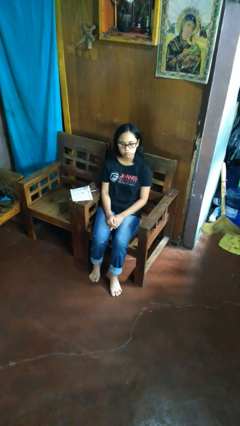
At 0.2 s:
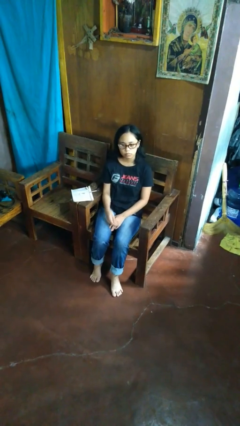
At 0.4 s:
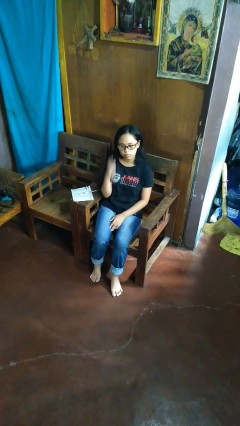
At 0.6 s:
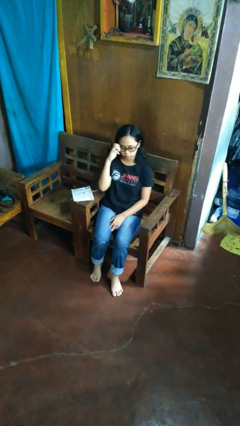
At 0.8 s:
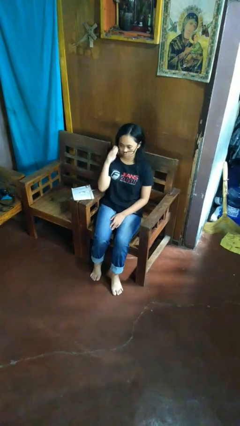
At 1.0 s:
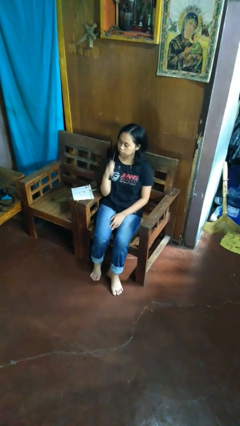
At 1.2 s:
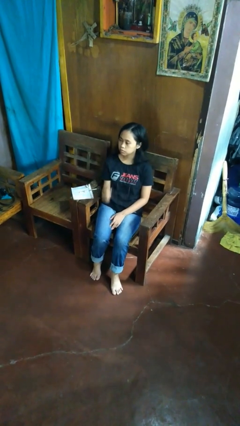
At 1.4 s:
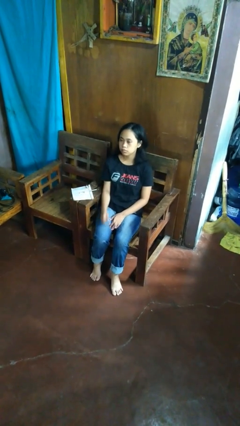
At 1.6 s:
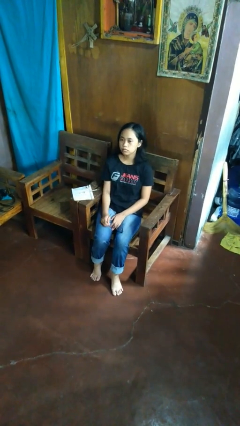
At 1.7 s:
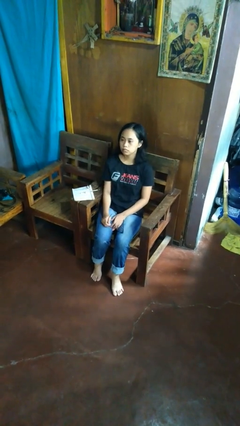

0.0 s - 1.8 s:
person takes off glasses

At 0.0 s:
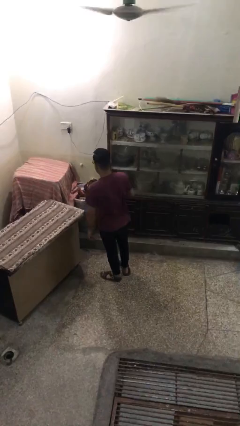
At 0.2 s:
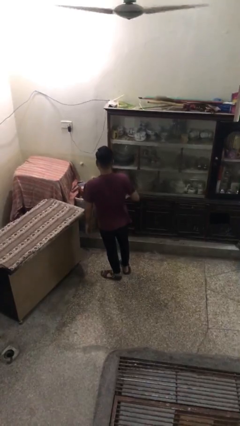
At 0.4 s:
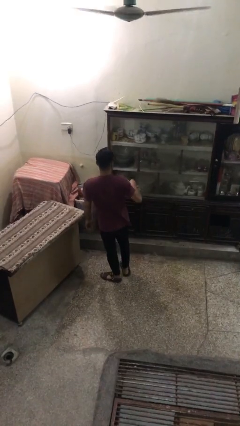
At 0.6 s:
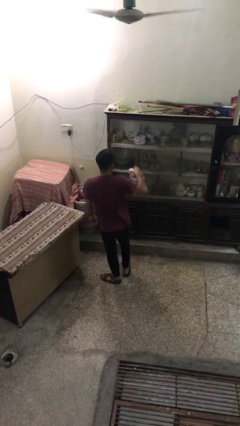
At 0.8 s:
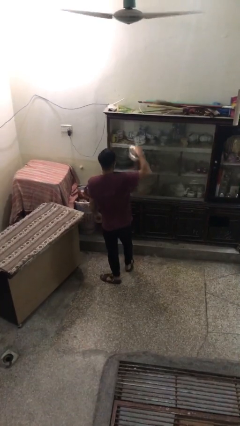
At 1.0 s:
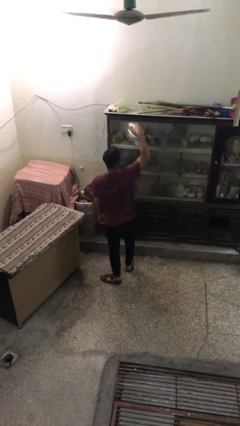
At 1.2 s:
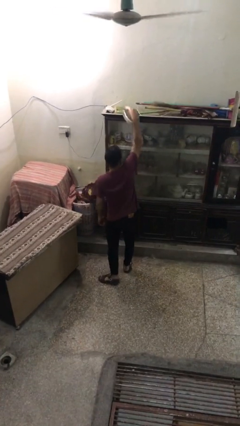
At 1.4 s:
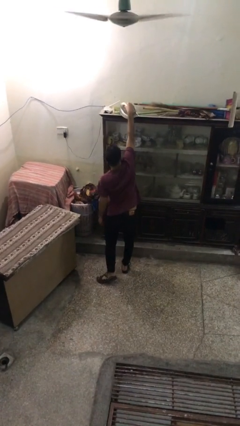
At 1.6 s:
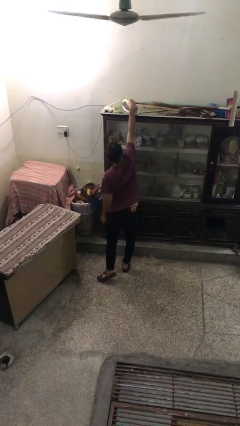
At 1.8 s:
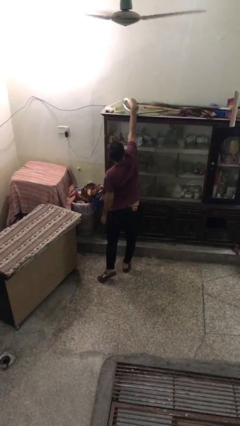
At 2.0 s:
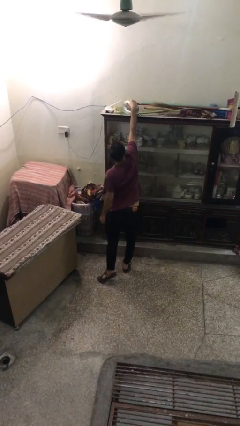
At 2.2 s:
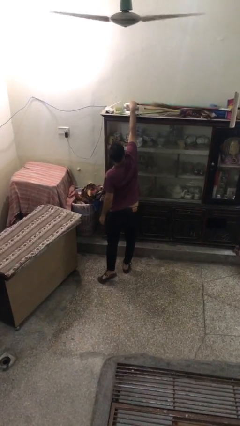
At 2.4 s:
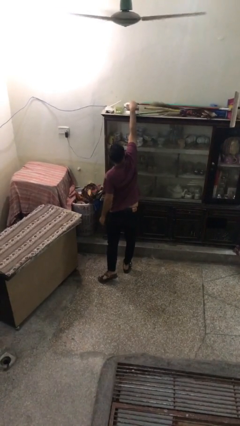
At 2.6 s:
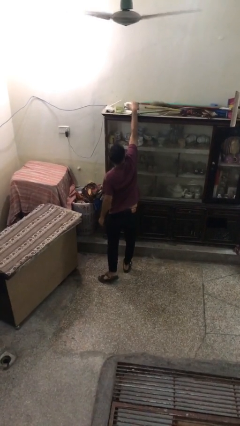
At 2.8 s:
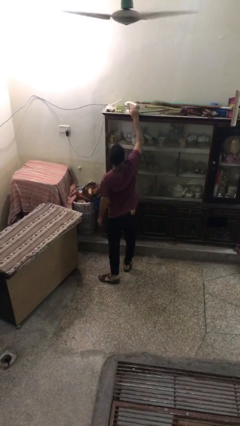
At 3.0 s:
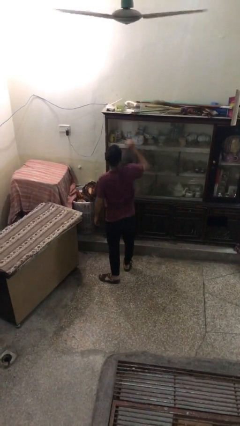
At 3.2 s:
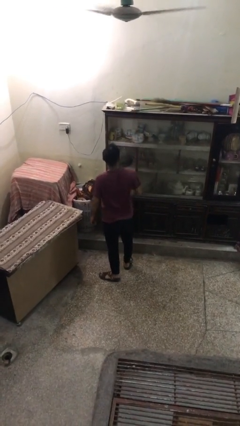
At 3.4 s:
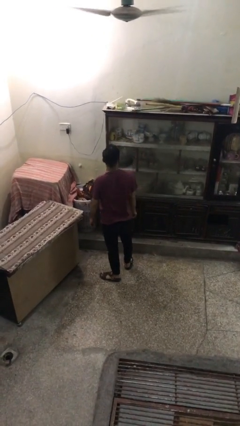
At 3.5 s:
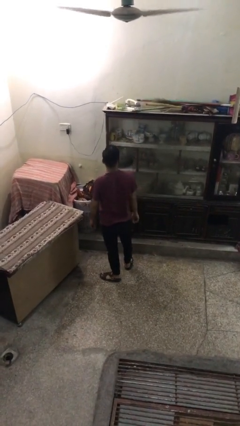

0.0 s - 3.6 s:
person puts down object on shelf

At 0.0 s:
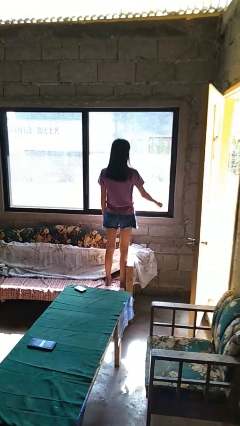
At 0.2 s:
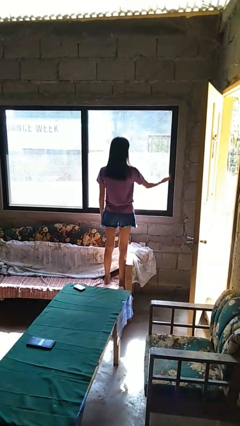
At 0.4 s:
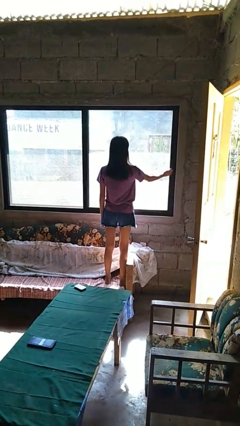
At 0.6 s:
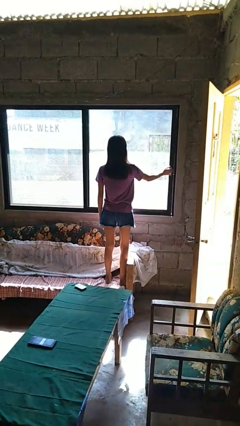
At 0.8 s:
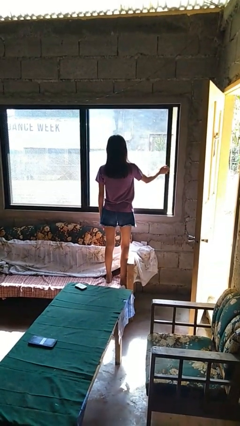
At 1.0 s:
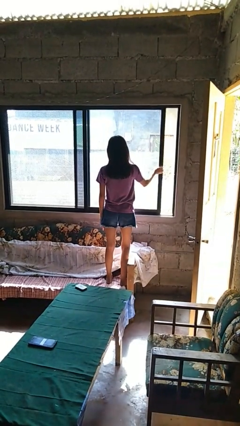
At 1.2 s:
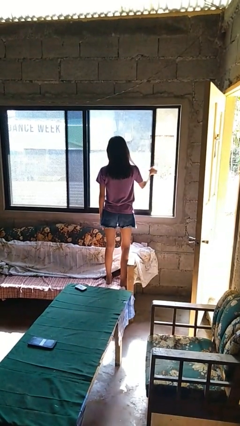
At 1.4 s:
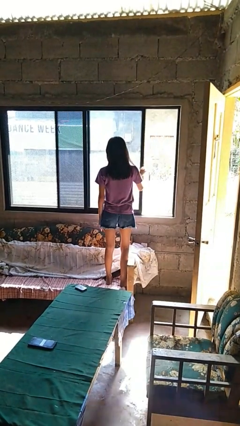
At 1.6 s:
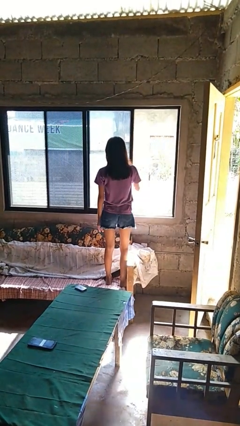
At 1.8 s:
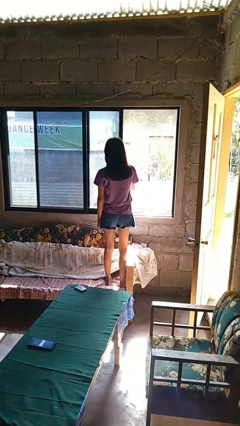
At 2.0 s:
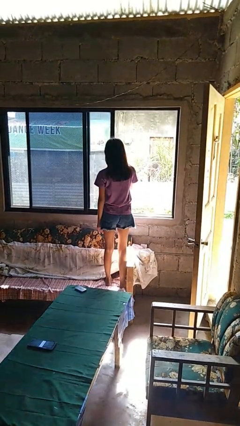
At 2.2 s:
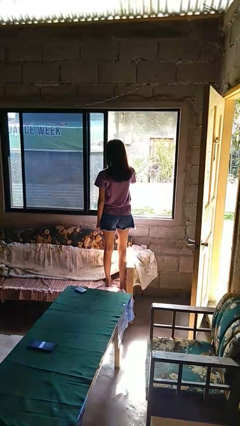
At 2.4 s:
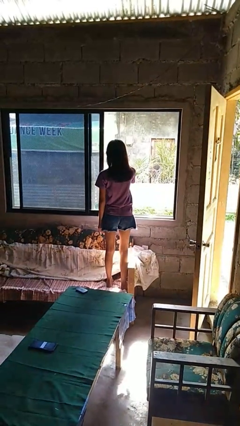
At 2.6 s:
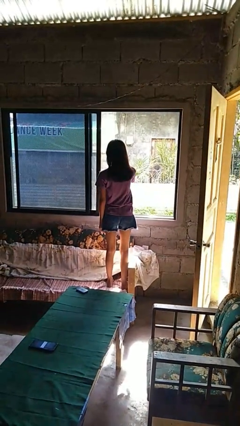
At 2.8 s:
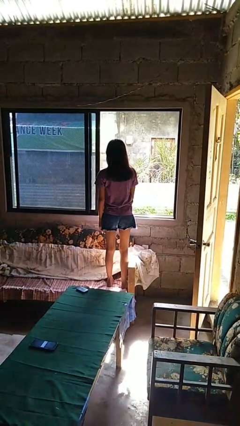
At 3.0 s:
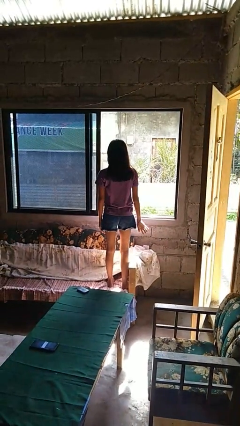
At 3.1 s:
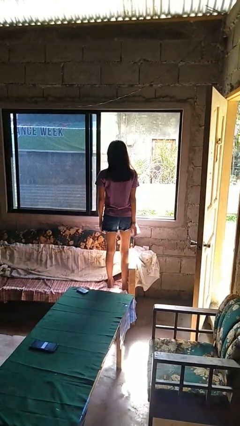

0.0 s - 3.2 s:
person opens home window

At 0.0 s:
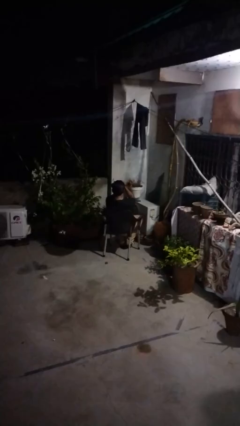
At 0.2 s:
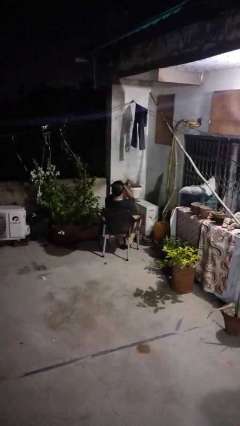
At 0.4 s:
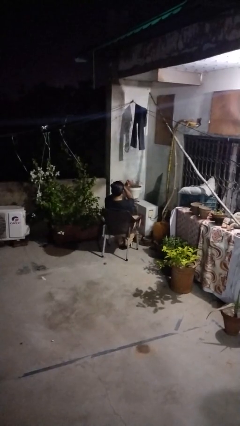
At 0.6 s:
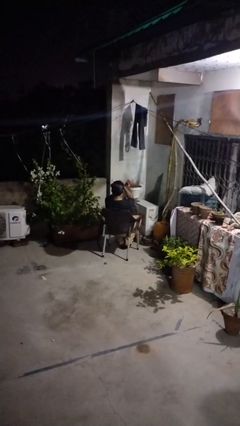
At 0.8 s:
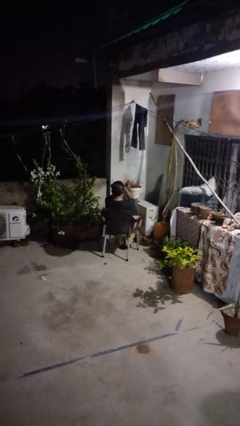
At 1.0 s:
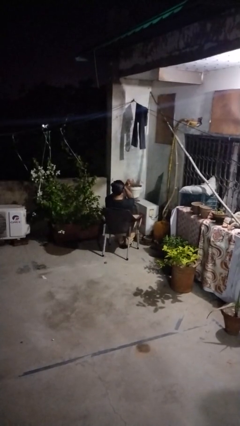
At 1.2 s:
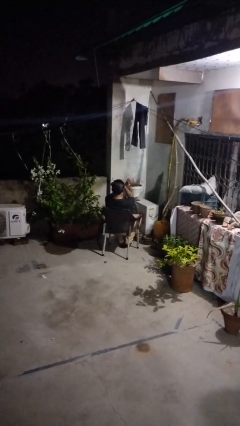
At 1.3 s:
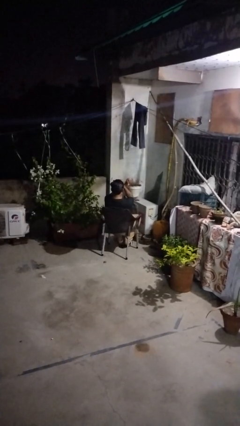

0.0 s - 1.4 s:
person gestures arms x

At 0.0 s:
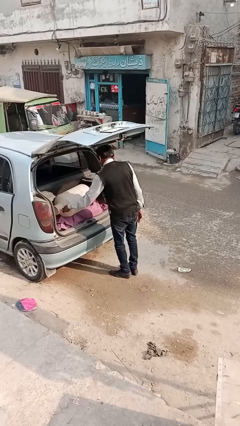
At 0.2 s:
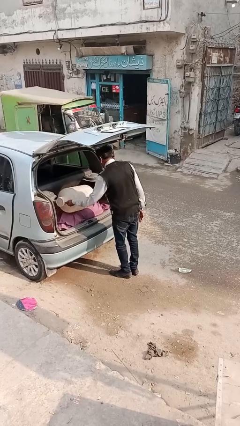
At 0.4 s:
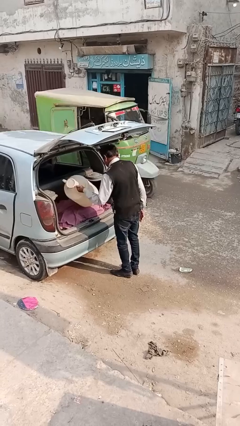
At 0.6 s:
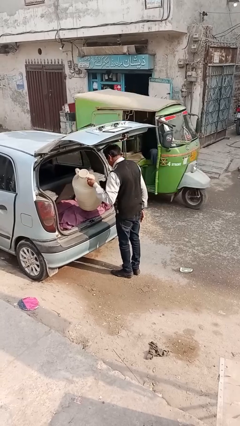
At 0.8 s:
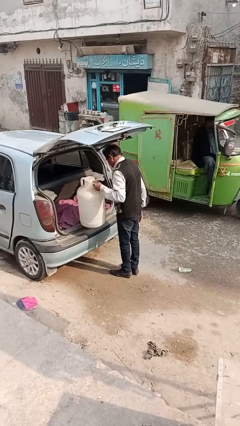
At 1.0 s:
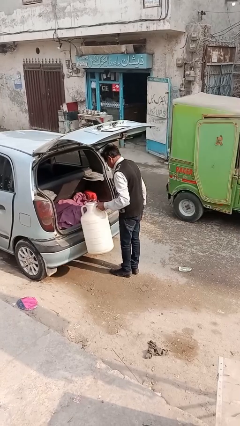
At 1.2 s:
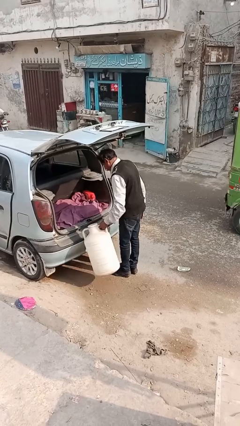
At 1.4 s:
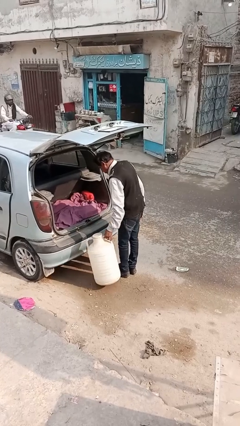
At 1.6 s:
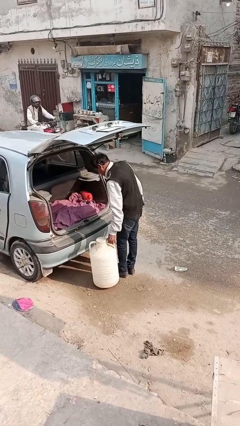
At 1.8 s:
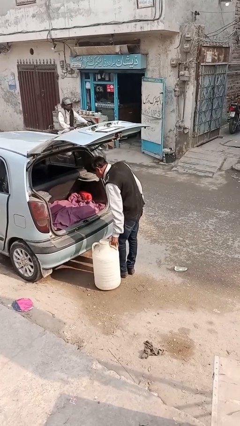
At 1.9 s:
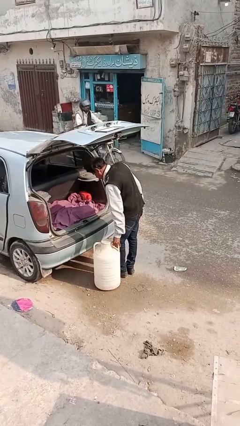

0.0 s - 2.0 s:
person unloads car

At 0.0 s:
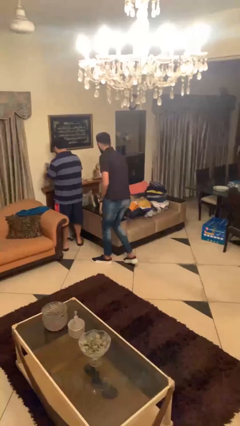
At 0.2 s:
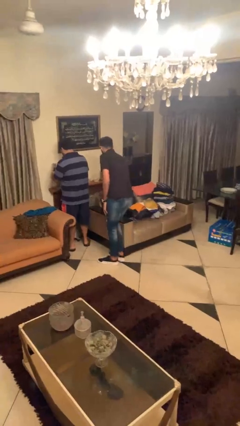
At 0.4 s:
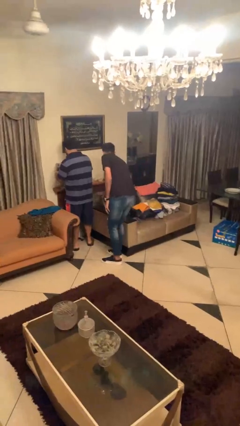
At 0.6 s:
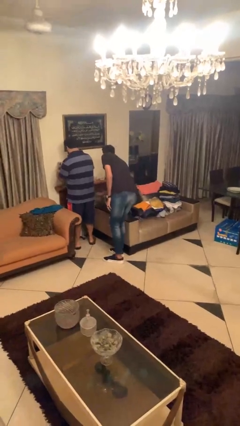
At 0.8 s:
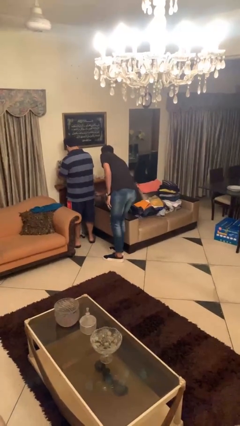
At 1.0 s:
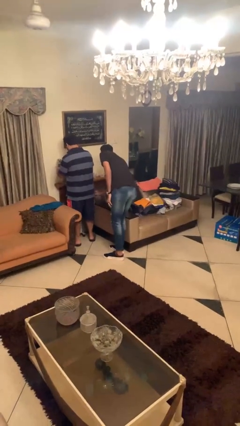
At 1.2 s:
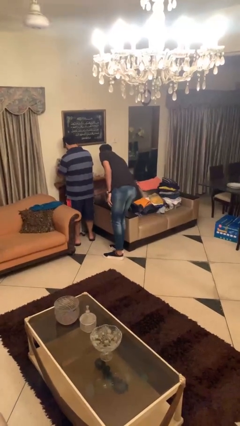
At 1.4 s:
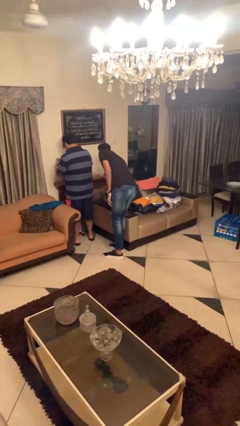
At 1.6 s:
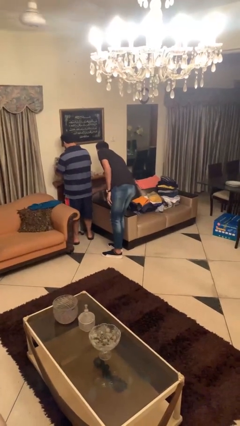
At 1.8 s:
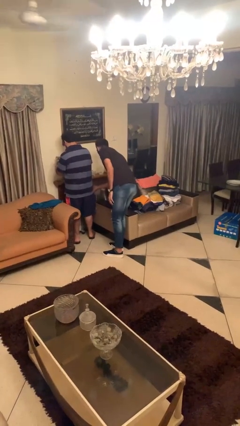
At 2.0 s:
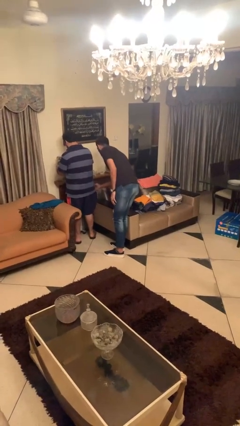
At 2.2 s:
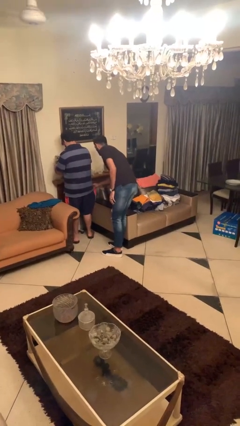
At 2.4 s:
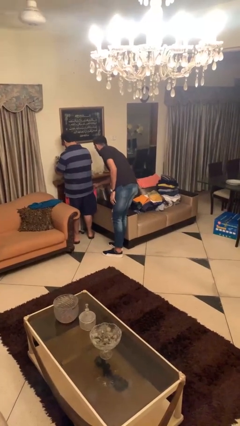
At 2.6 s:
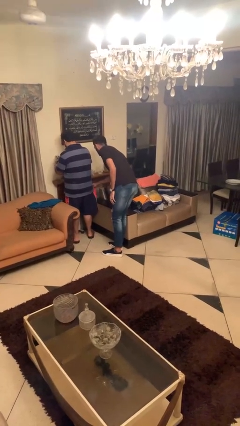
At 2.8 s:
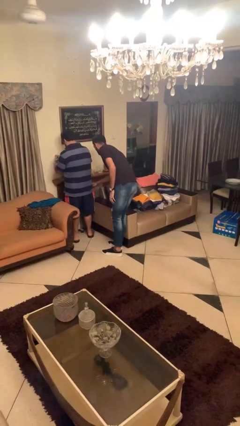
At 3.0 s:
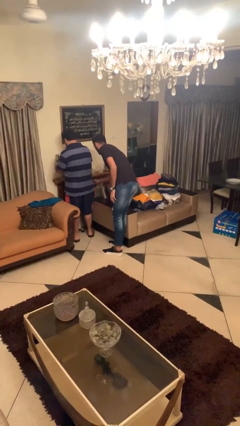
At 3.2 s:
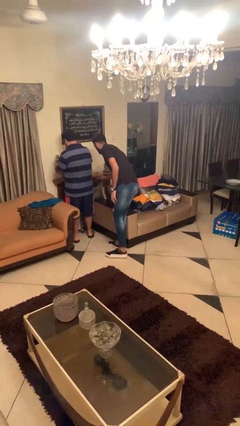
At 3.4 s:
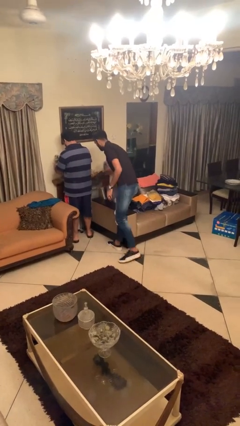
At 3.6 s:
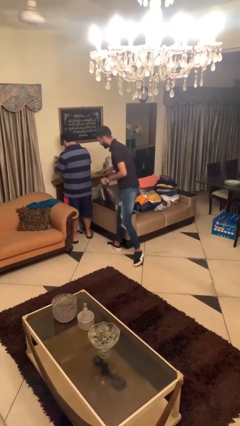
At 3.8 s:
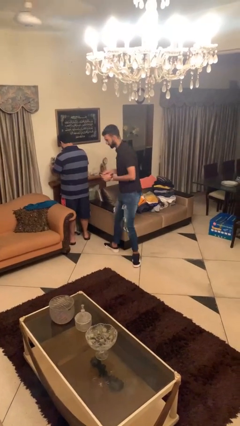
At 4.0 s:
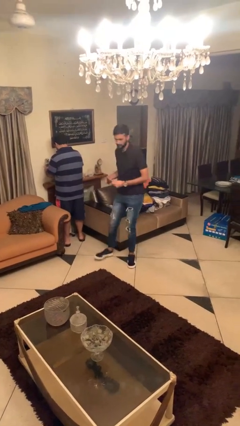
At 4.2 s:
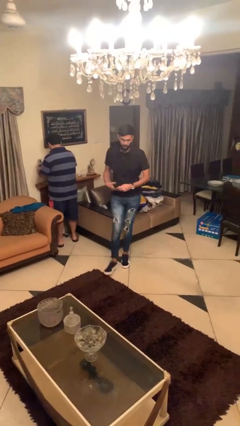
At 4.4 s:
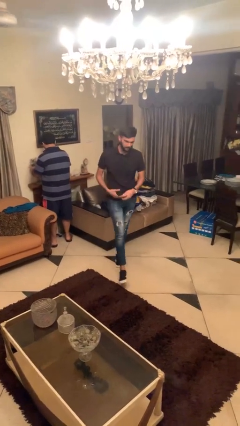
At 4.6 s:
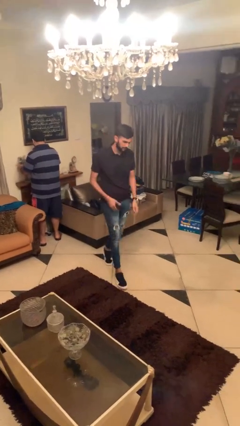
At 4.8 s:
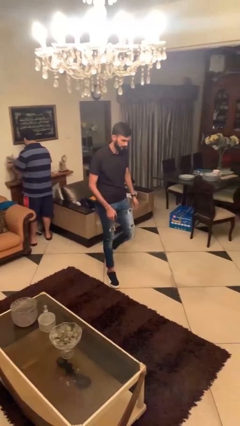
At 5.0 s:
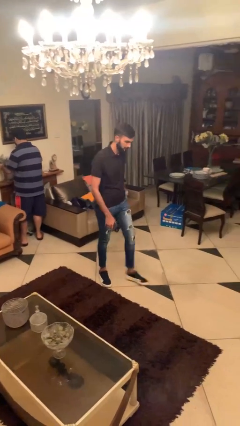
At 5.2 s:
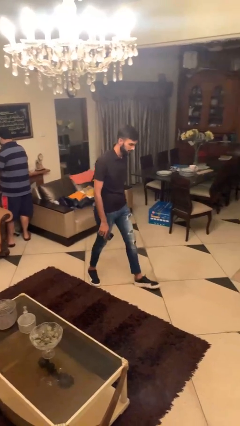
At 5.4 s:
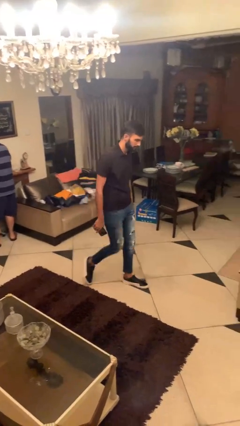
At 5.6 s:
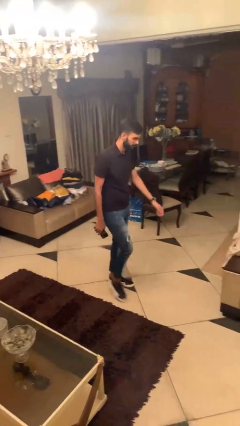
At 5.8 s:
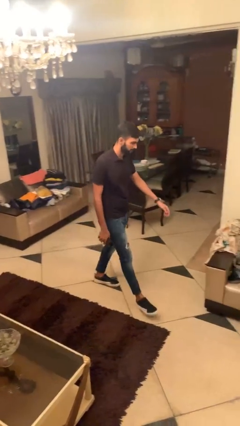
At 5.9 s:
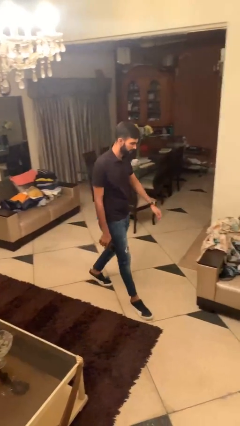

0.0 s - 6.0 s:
person steals object from person
